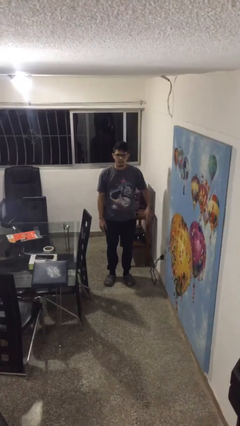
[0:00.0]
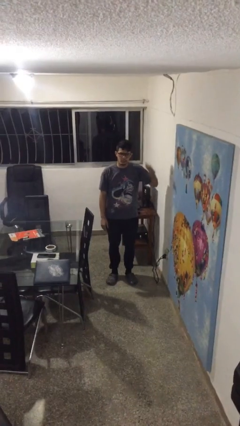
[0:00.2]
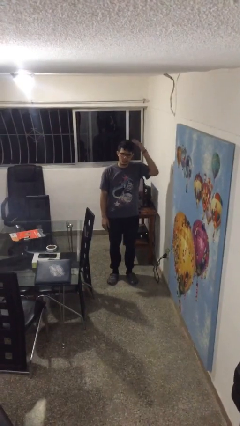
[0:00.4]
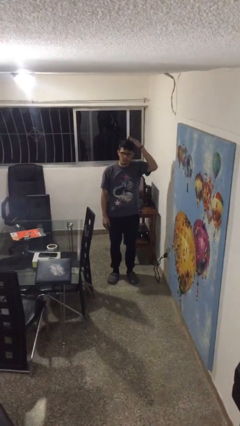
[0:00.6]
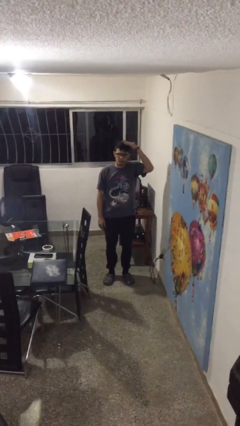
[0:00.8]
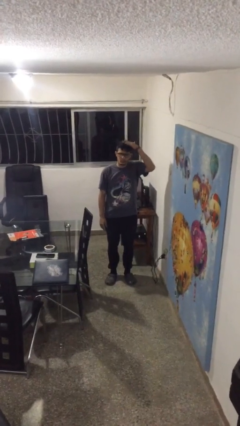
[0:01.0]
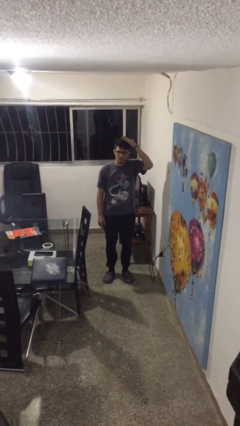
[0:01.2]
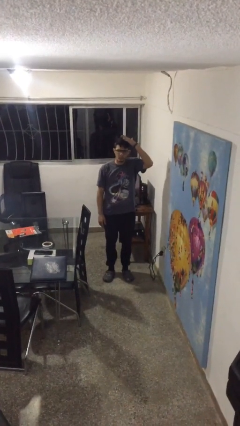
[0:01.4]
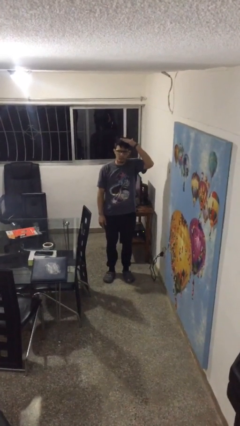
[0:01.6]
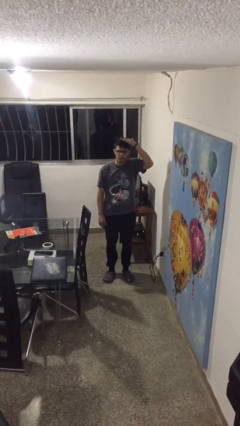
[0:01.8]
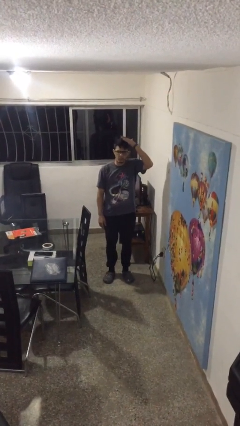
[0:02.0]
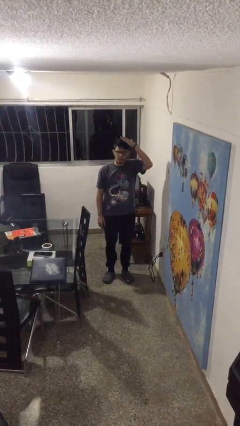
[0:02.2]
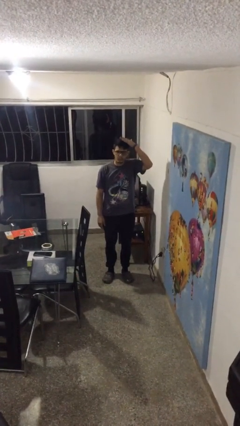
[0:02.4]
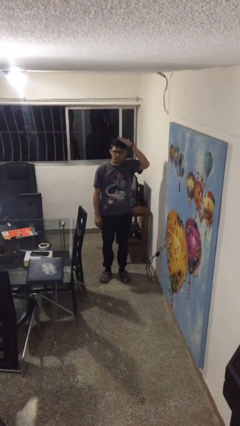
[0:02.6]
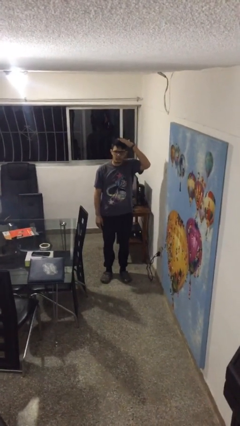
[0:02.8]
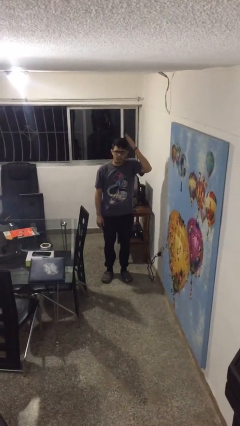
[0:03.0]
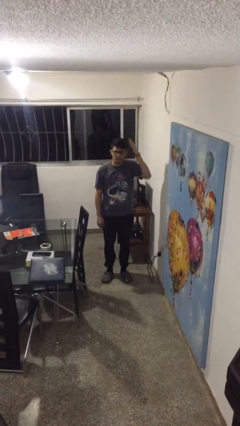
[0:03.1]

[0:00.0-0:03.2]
person pats head

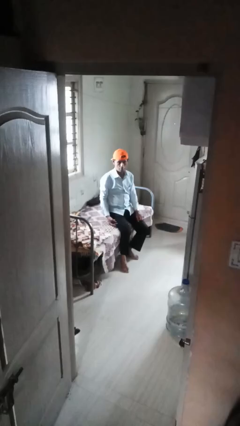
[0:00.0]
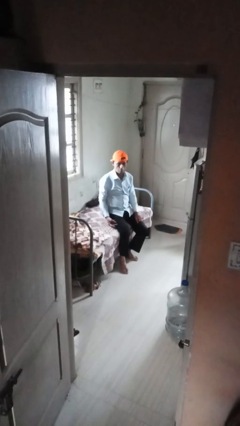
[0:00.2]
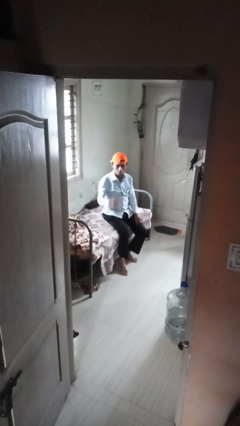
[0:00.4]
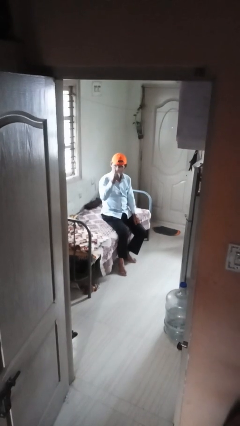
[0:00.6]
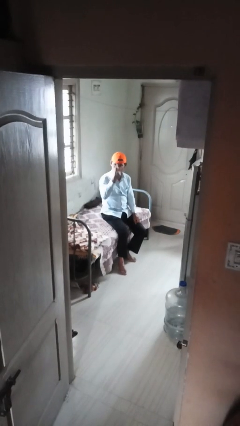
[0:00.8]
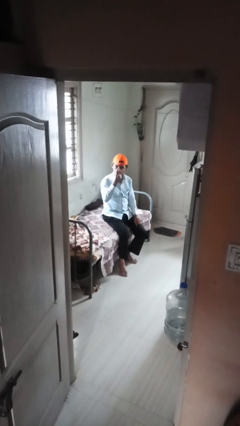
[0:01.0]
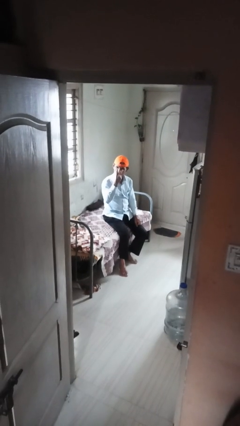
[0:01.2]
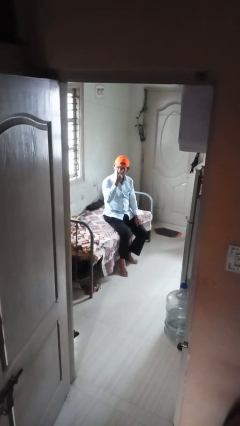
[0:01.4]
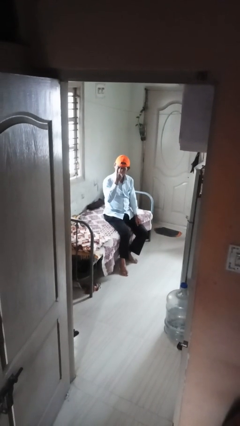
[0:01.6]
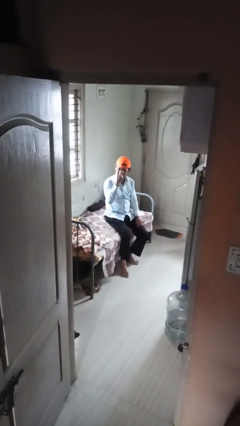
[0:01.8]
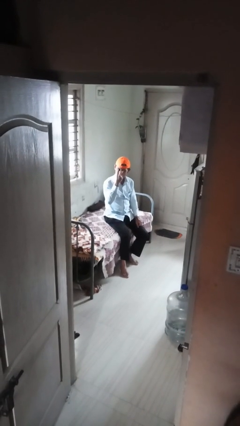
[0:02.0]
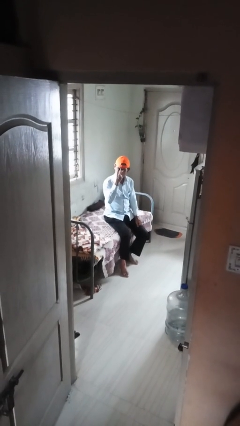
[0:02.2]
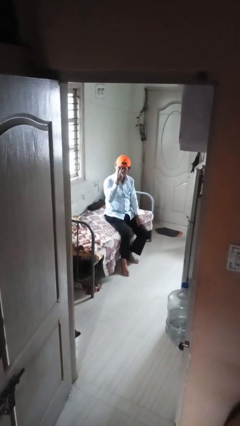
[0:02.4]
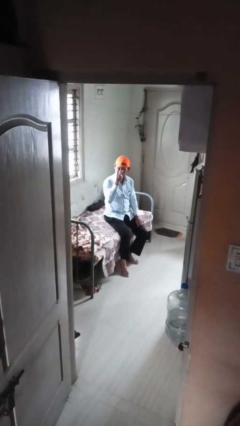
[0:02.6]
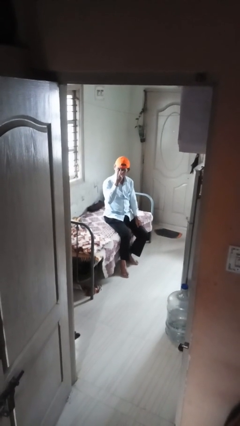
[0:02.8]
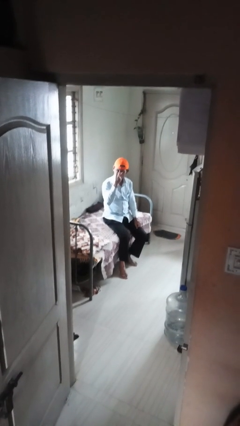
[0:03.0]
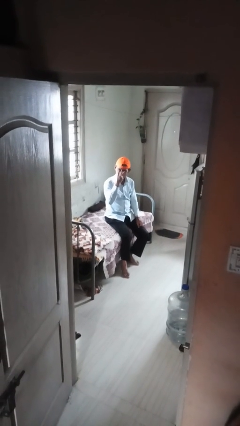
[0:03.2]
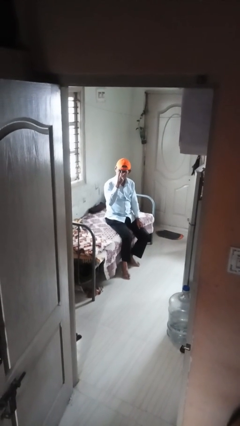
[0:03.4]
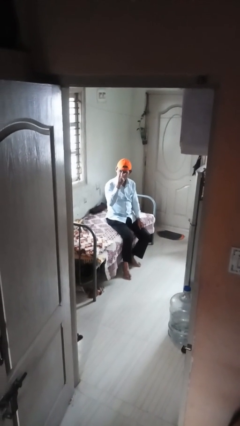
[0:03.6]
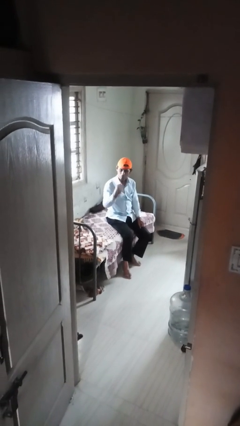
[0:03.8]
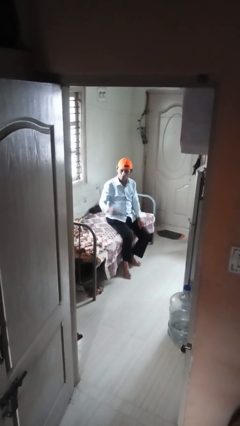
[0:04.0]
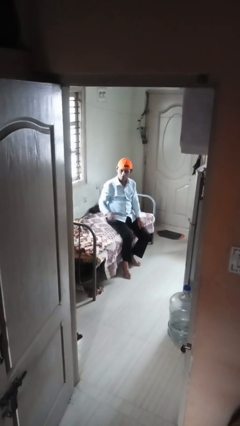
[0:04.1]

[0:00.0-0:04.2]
person gestures watch closely

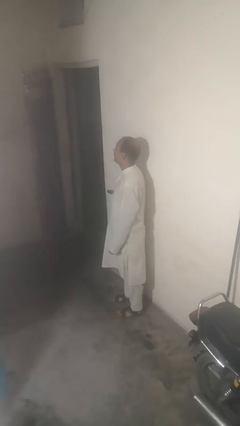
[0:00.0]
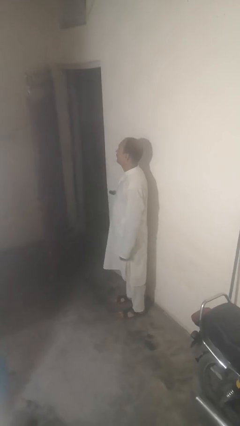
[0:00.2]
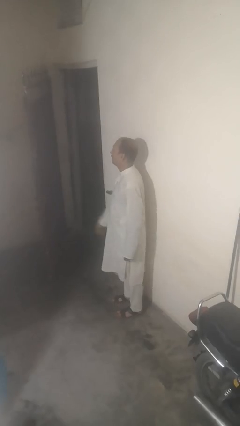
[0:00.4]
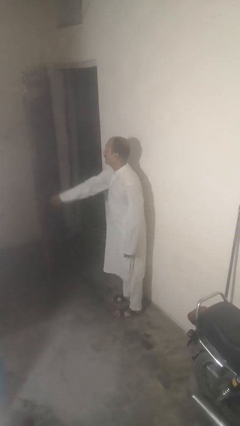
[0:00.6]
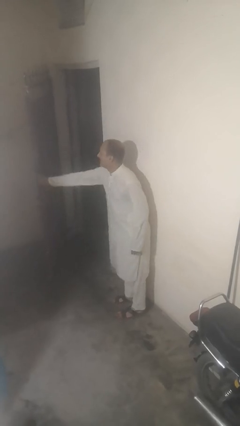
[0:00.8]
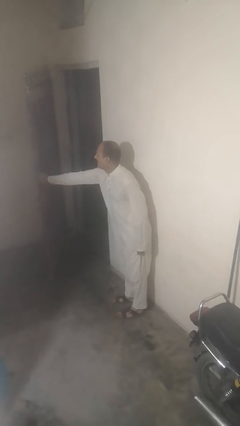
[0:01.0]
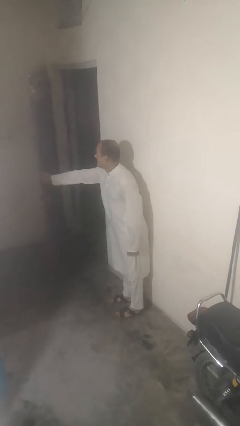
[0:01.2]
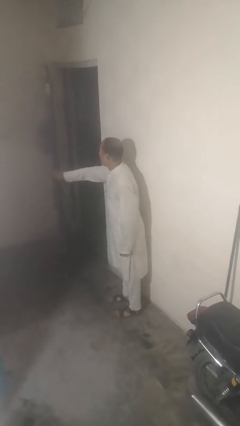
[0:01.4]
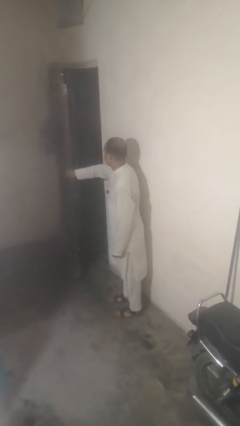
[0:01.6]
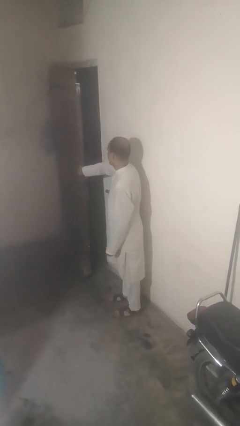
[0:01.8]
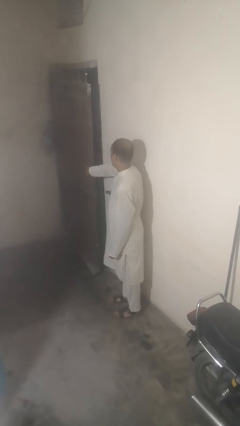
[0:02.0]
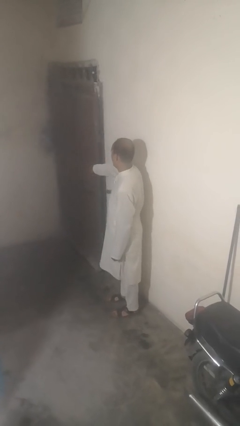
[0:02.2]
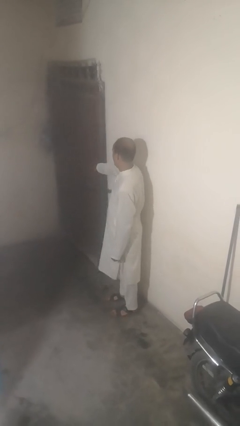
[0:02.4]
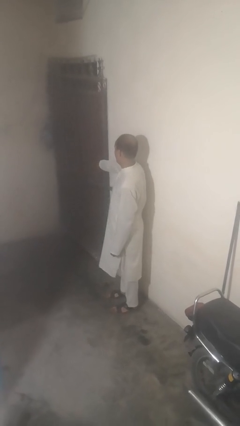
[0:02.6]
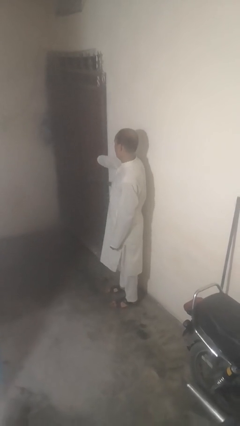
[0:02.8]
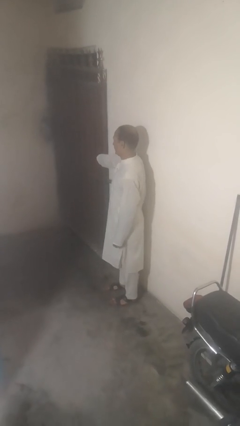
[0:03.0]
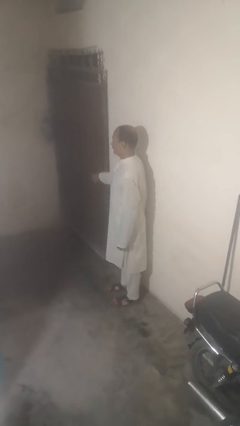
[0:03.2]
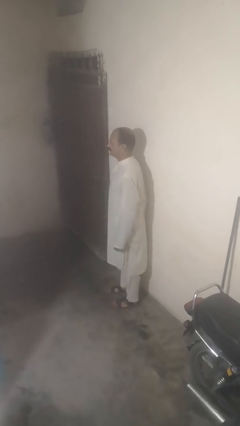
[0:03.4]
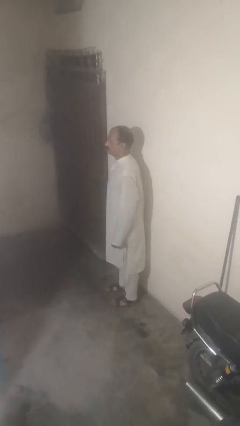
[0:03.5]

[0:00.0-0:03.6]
person closes gate

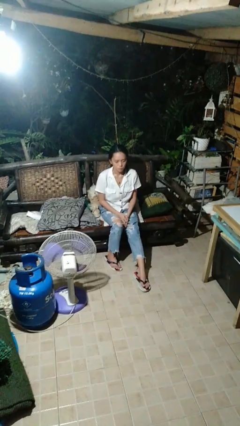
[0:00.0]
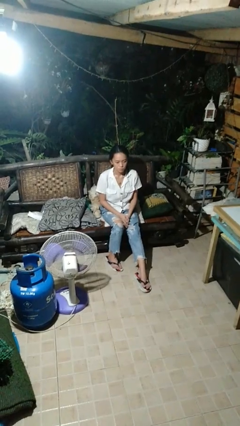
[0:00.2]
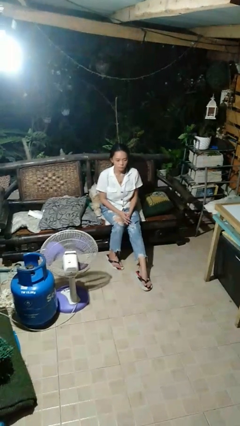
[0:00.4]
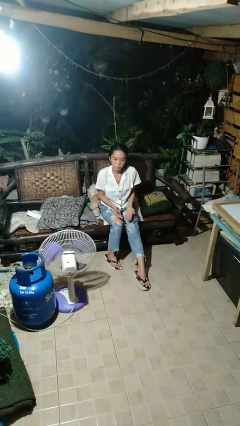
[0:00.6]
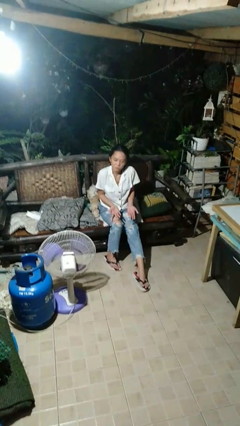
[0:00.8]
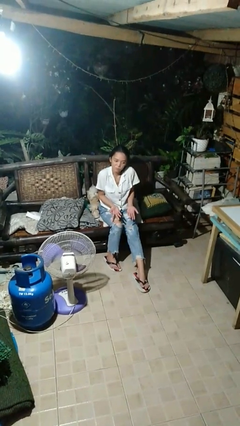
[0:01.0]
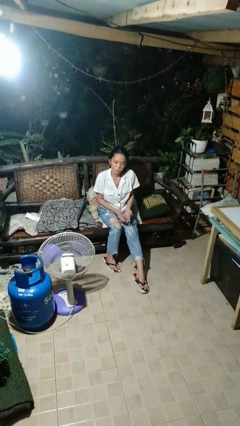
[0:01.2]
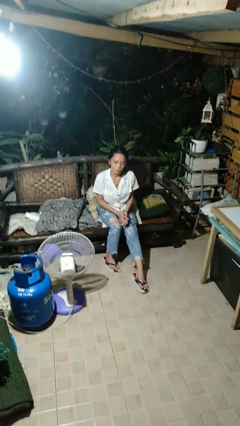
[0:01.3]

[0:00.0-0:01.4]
person shrugs

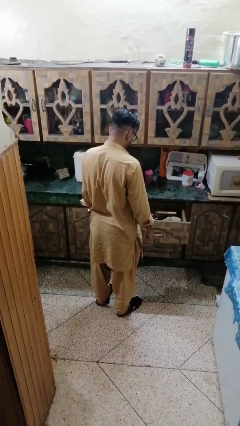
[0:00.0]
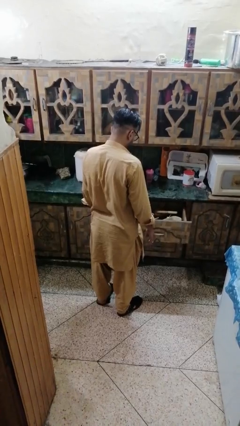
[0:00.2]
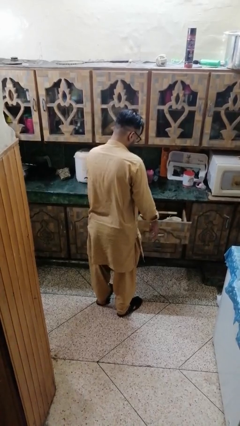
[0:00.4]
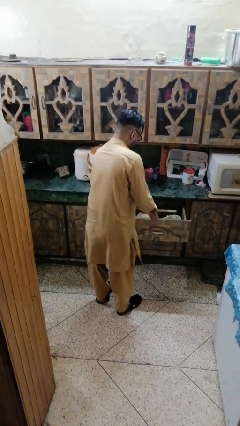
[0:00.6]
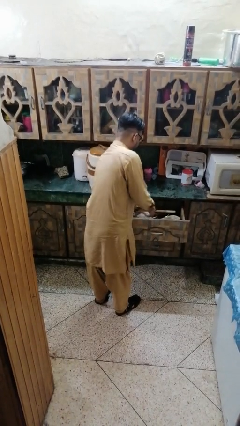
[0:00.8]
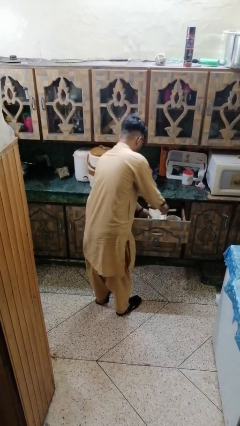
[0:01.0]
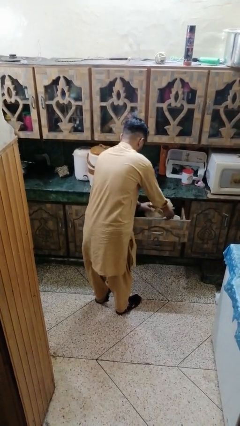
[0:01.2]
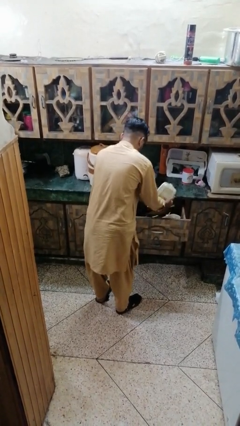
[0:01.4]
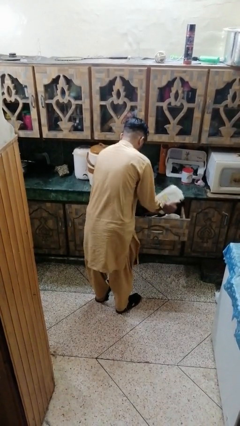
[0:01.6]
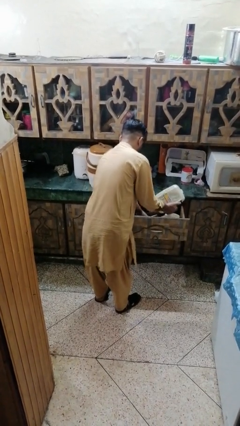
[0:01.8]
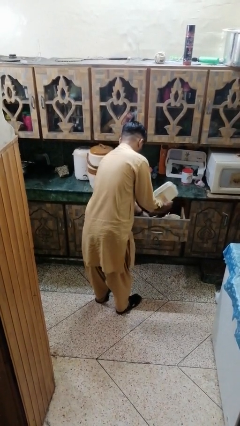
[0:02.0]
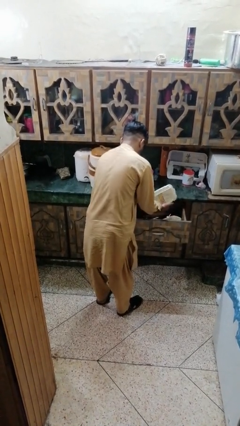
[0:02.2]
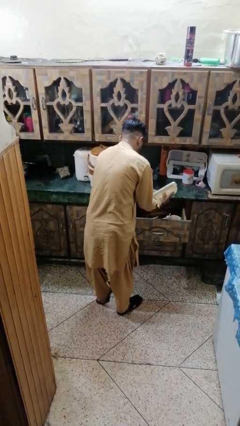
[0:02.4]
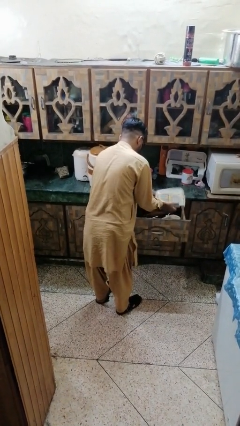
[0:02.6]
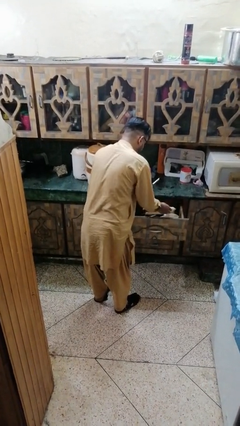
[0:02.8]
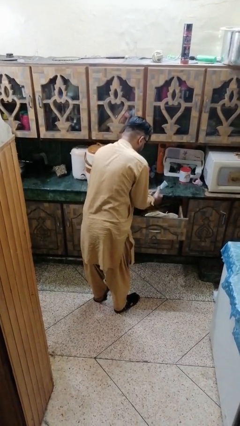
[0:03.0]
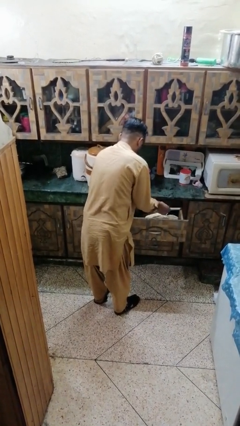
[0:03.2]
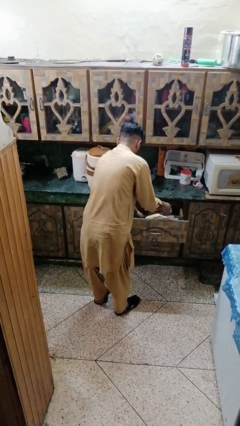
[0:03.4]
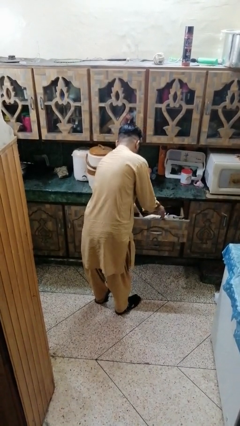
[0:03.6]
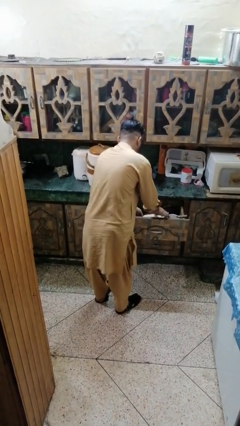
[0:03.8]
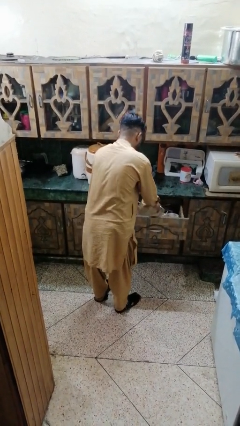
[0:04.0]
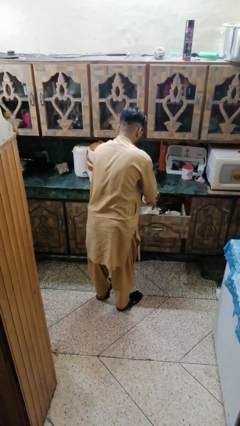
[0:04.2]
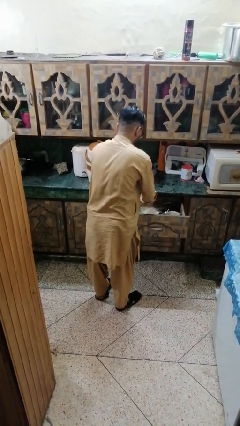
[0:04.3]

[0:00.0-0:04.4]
person searches in kitchen drawer

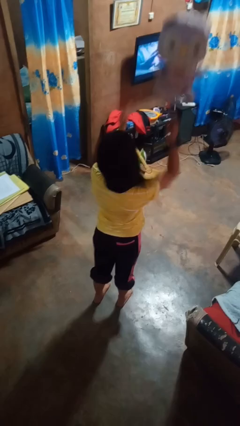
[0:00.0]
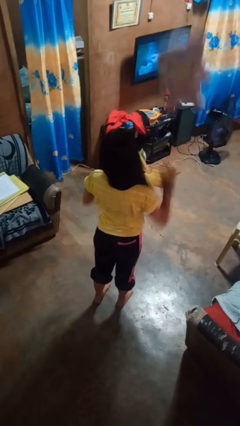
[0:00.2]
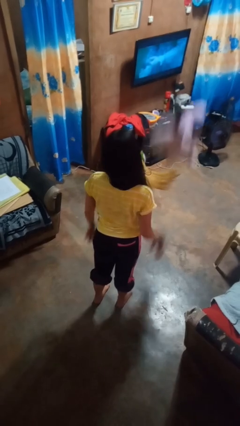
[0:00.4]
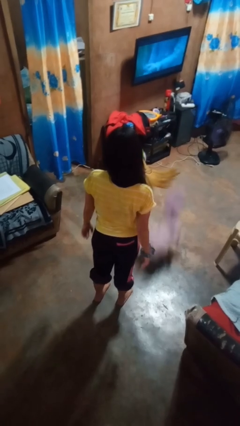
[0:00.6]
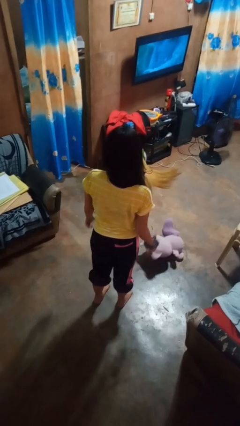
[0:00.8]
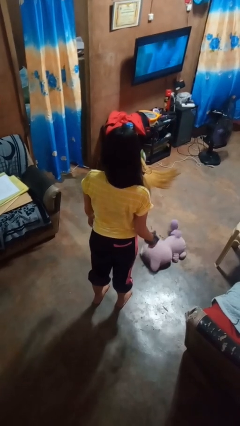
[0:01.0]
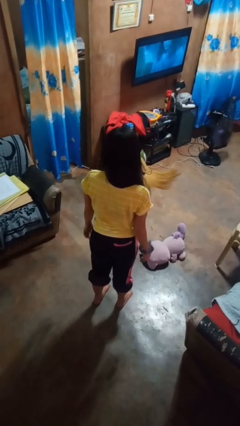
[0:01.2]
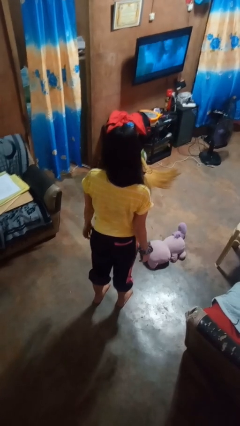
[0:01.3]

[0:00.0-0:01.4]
person throws object into air
